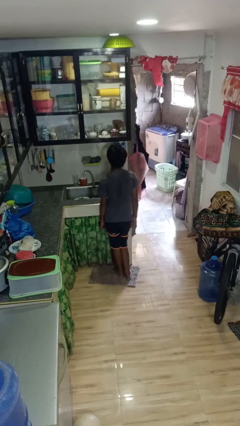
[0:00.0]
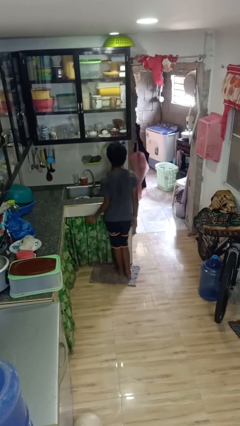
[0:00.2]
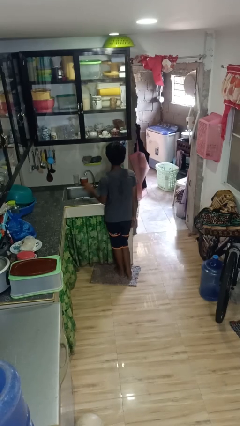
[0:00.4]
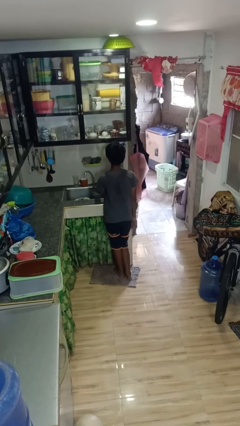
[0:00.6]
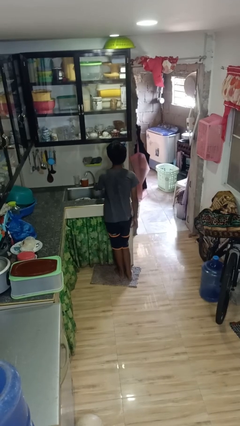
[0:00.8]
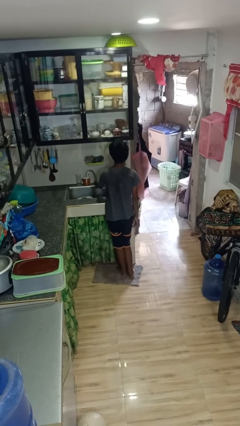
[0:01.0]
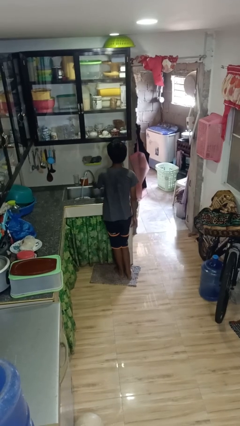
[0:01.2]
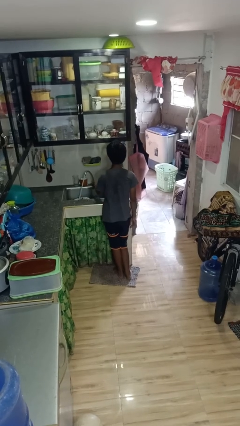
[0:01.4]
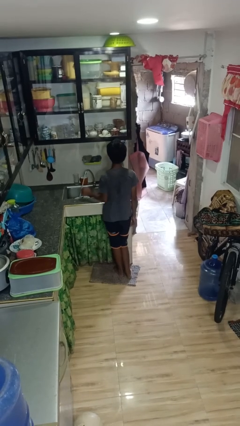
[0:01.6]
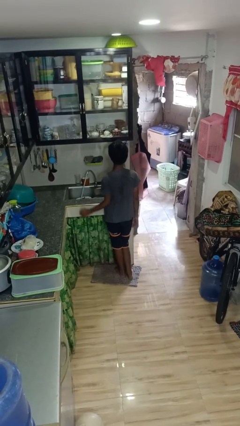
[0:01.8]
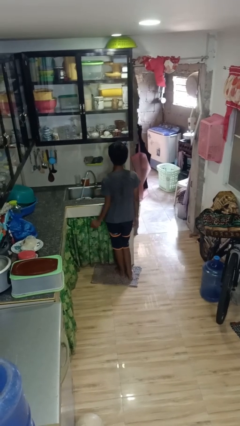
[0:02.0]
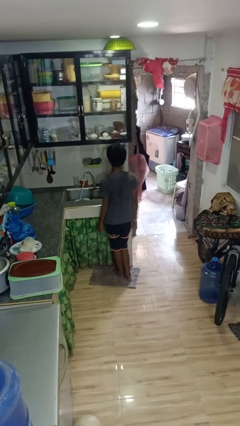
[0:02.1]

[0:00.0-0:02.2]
person turns on faucet

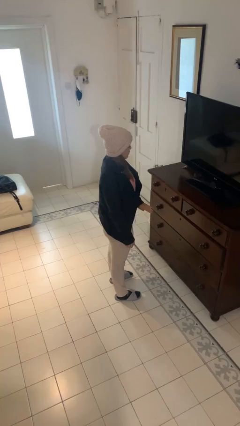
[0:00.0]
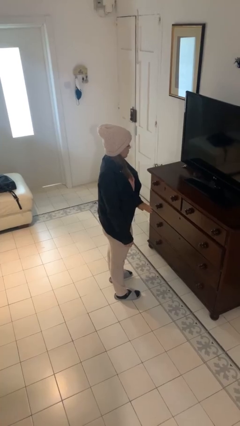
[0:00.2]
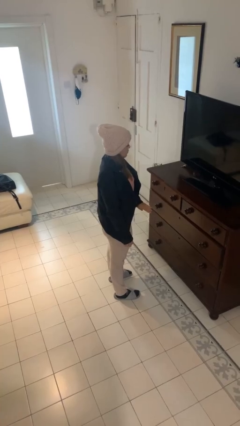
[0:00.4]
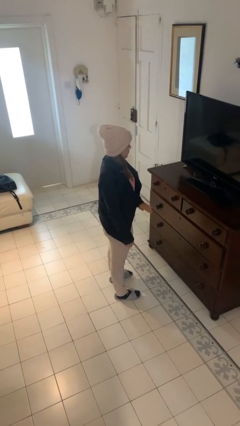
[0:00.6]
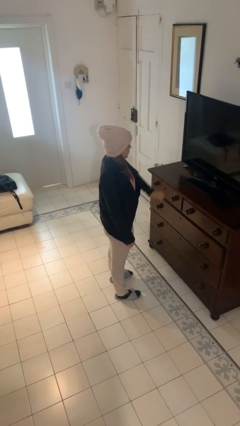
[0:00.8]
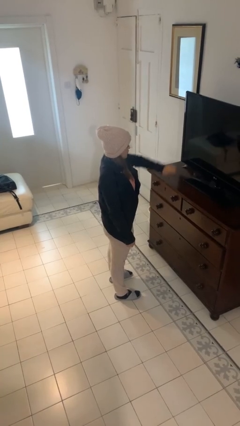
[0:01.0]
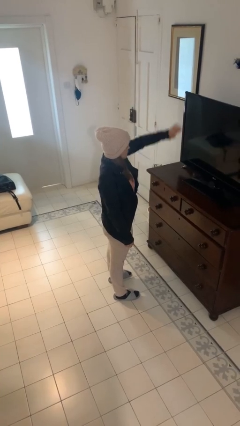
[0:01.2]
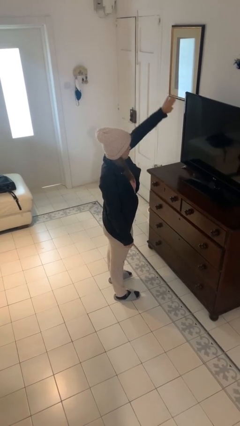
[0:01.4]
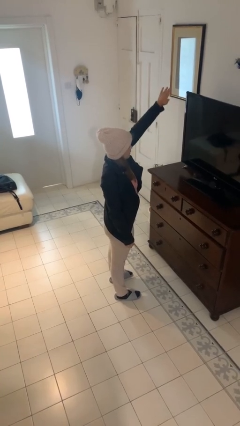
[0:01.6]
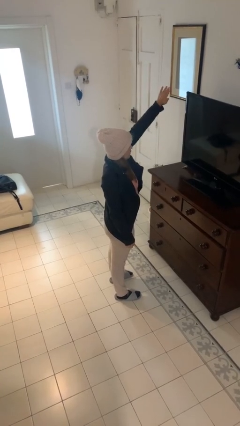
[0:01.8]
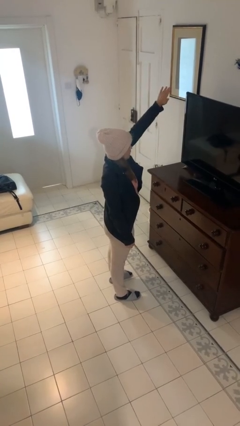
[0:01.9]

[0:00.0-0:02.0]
person gestures swipe up

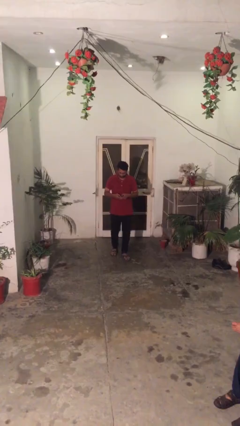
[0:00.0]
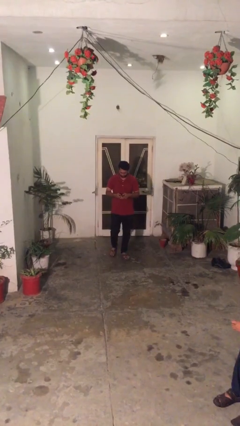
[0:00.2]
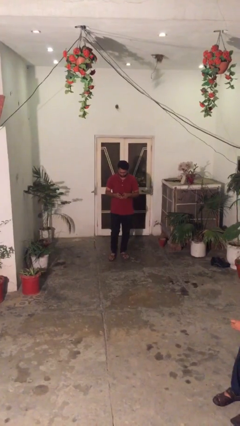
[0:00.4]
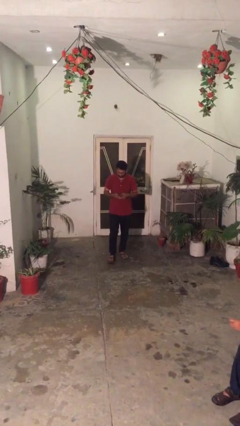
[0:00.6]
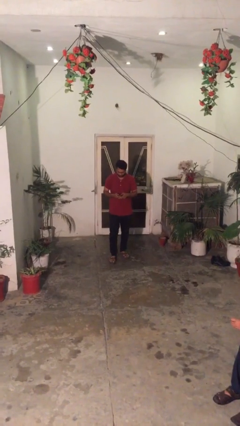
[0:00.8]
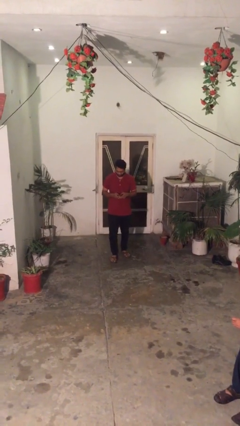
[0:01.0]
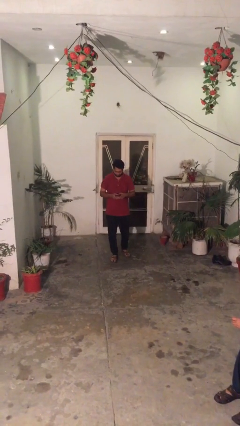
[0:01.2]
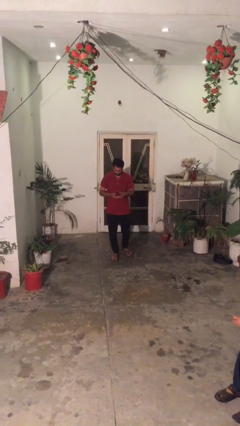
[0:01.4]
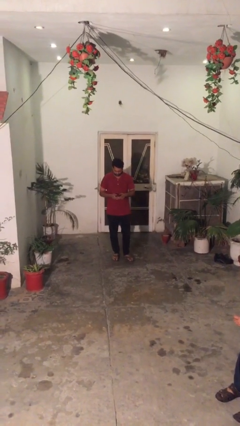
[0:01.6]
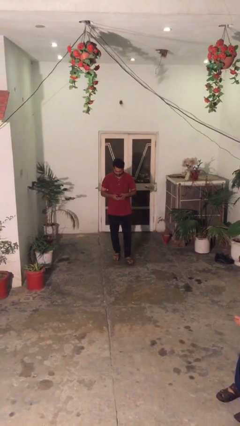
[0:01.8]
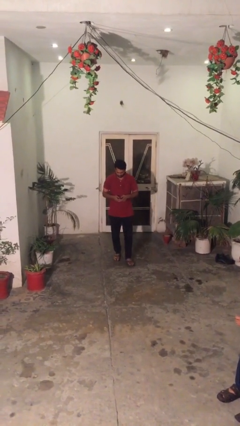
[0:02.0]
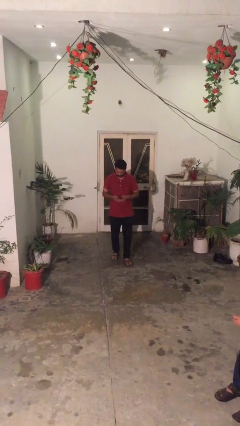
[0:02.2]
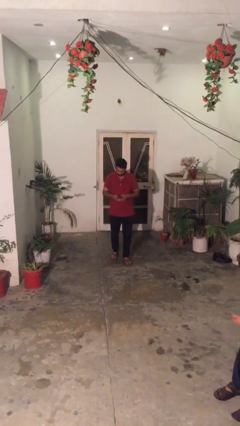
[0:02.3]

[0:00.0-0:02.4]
person texts on phone

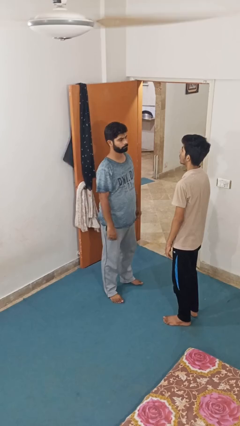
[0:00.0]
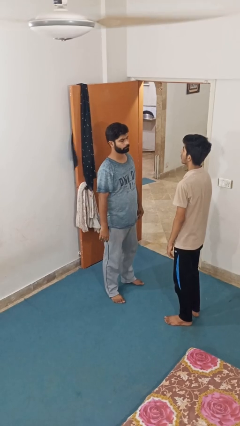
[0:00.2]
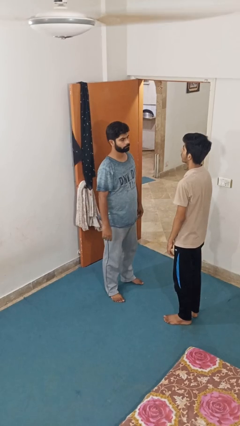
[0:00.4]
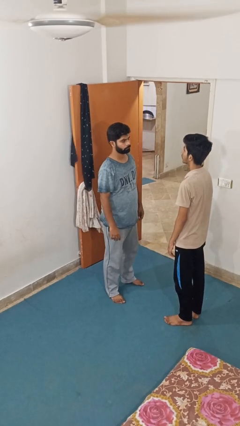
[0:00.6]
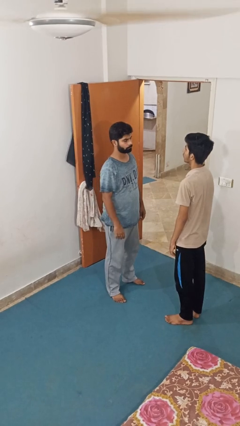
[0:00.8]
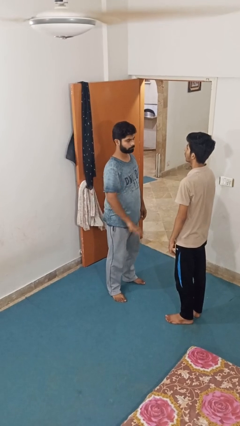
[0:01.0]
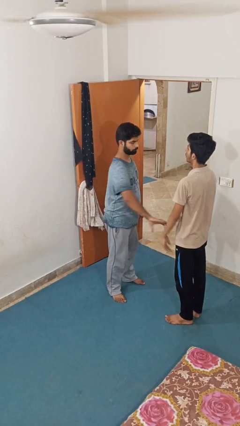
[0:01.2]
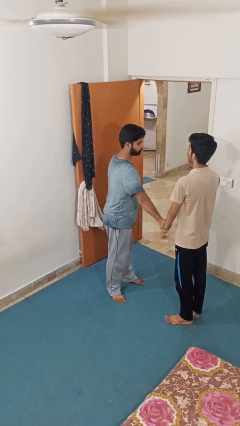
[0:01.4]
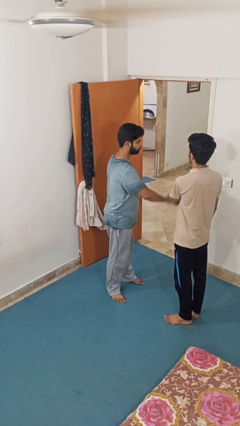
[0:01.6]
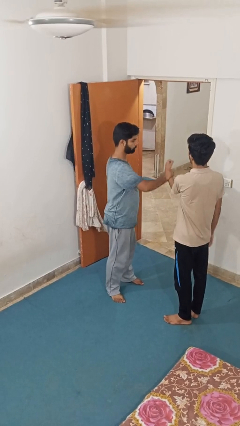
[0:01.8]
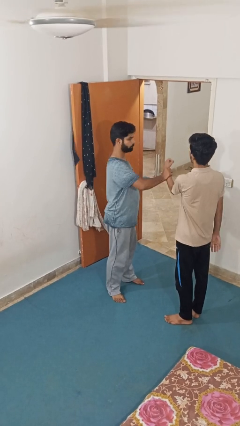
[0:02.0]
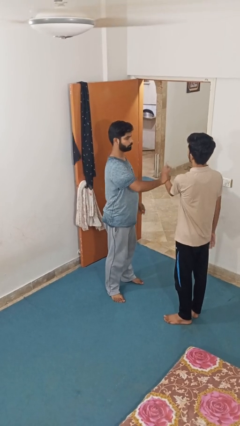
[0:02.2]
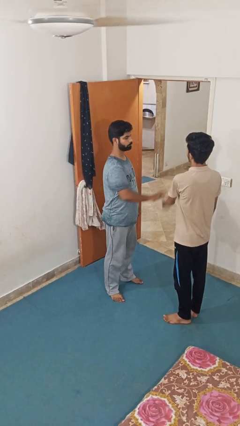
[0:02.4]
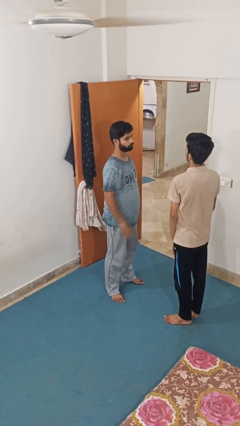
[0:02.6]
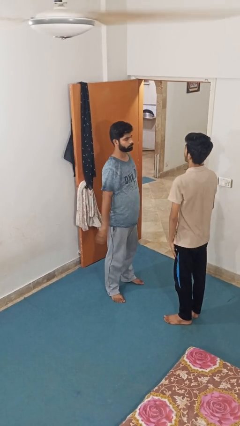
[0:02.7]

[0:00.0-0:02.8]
person grabs person by forearm

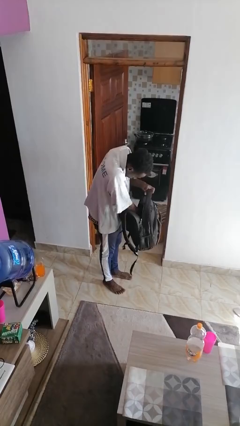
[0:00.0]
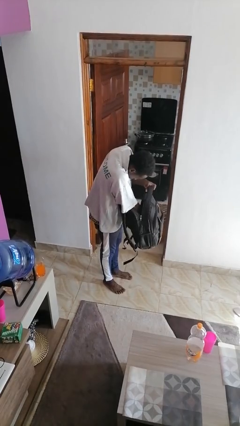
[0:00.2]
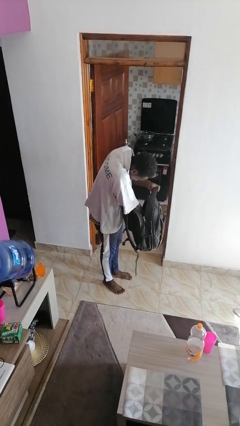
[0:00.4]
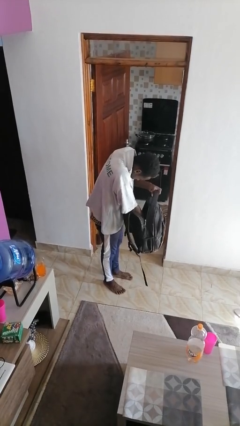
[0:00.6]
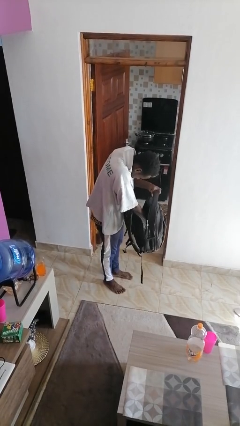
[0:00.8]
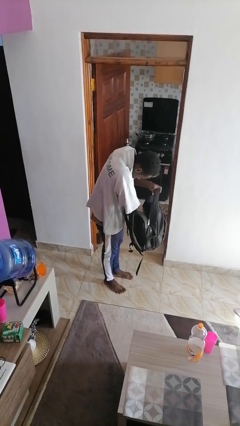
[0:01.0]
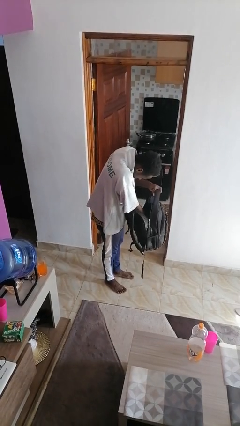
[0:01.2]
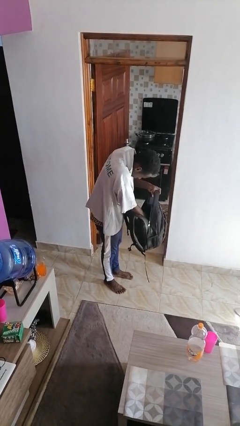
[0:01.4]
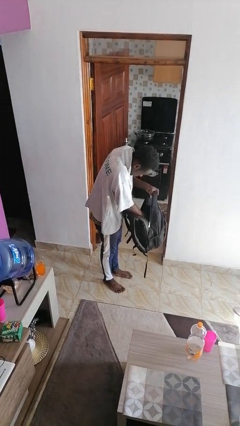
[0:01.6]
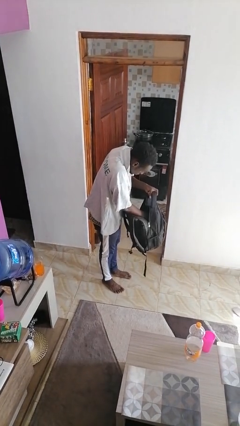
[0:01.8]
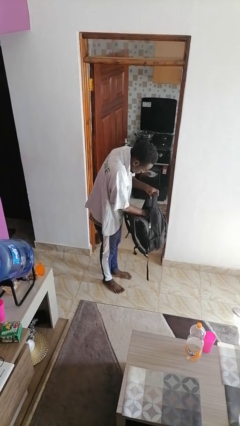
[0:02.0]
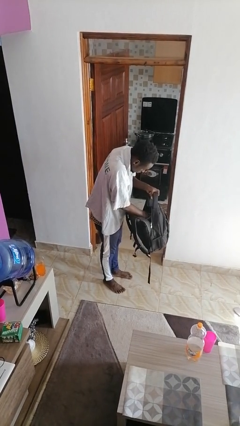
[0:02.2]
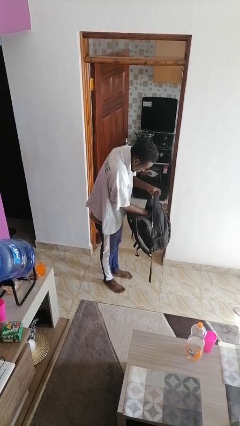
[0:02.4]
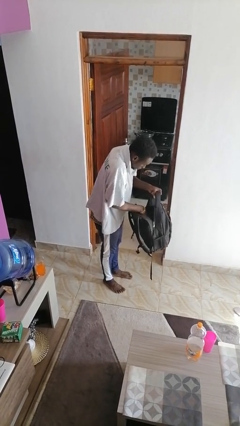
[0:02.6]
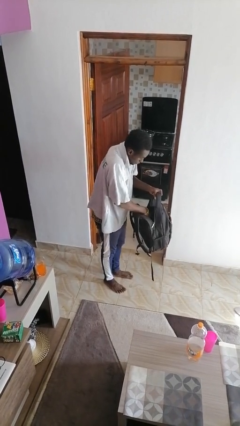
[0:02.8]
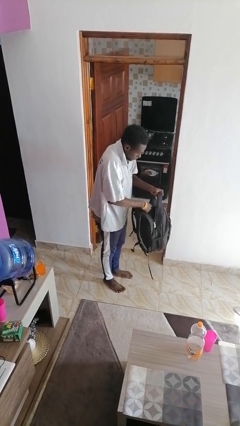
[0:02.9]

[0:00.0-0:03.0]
person searches in backpack

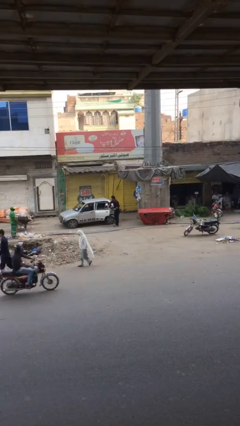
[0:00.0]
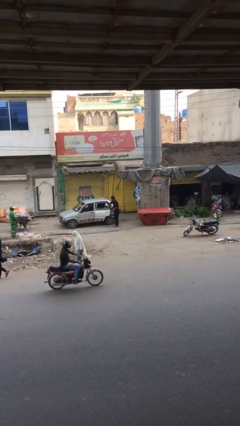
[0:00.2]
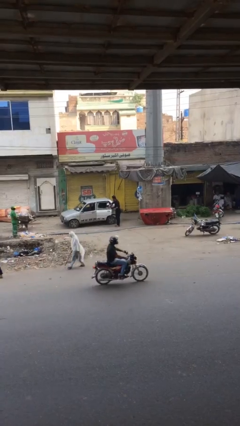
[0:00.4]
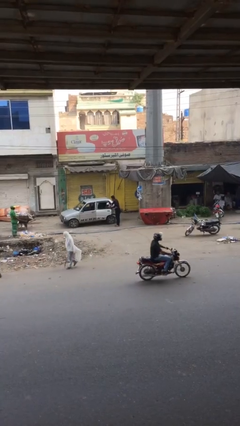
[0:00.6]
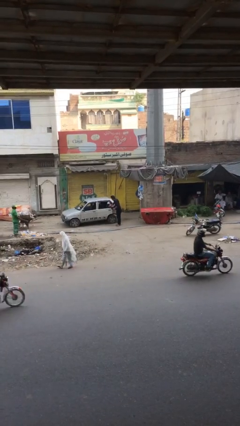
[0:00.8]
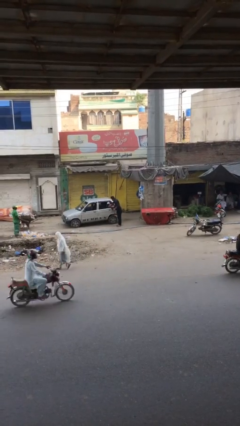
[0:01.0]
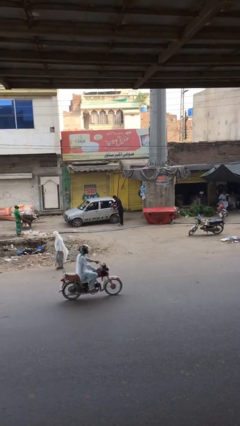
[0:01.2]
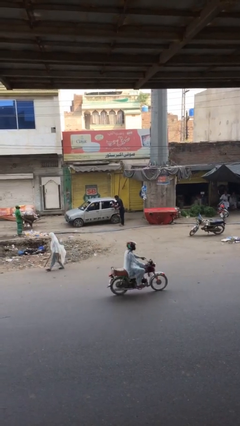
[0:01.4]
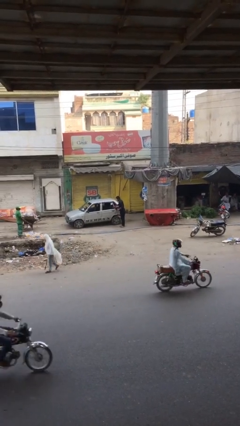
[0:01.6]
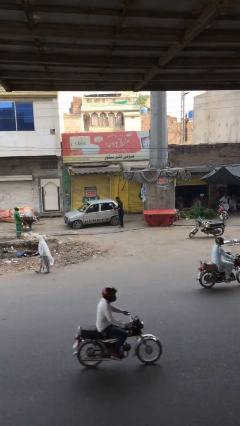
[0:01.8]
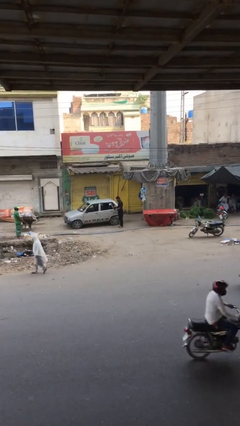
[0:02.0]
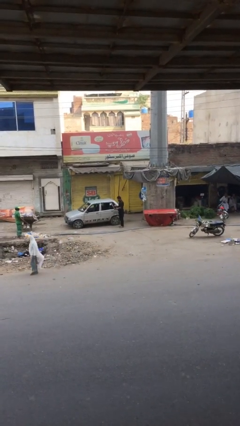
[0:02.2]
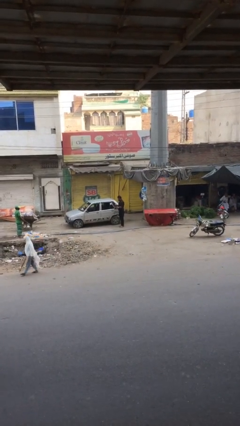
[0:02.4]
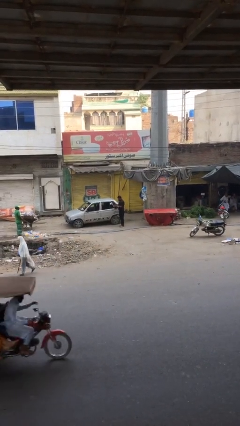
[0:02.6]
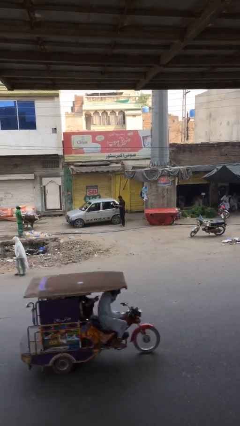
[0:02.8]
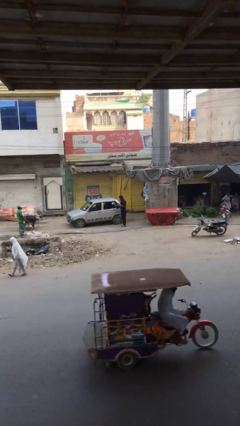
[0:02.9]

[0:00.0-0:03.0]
person closes car door

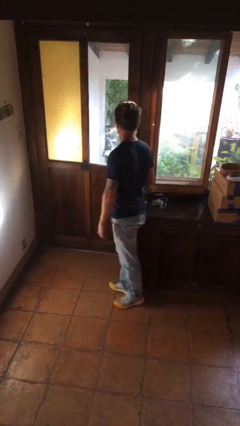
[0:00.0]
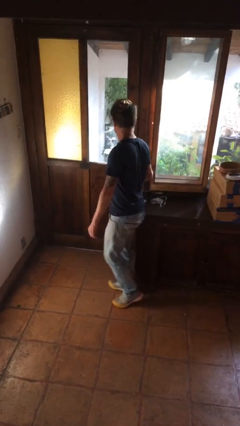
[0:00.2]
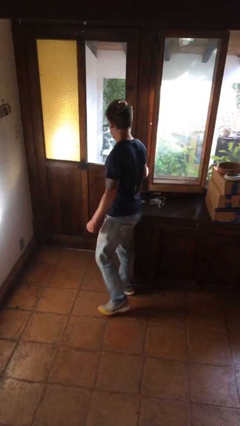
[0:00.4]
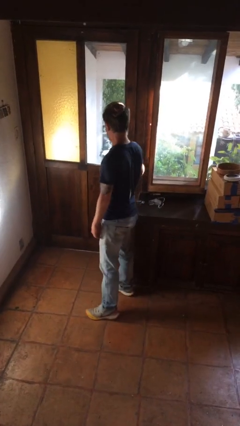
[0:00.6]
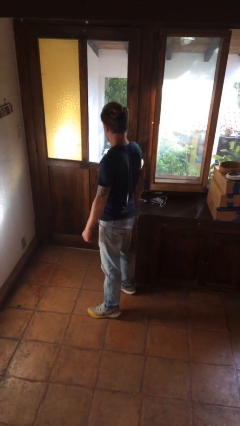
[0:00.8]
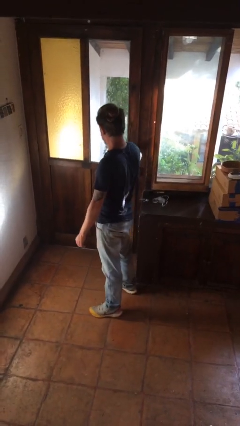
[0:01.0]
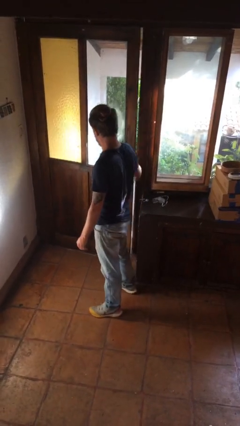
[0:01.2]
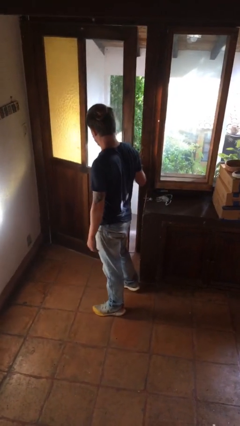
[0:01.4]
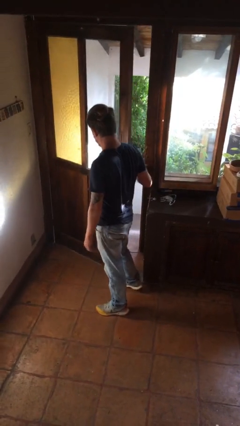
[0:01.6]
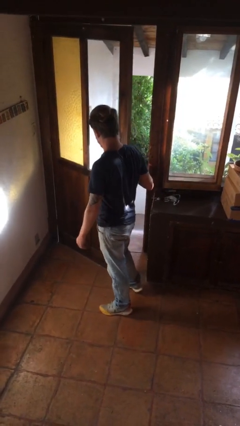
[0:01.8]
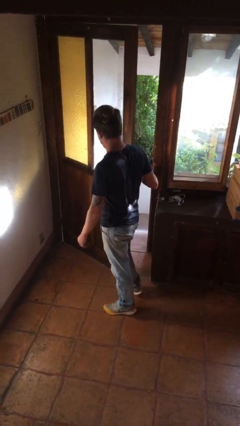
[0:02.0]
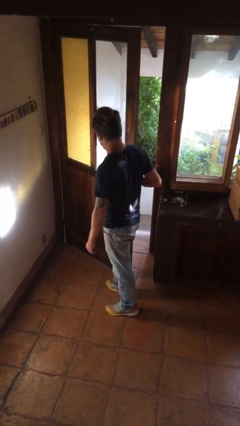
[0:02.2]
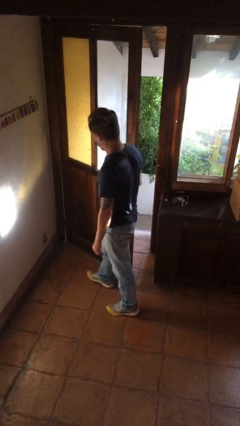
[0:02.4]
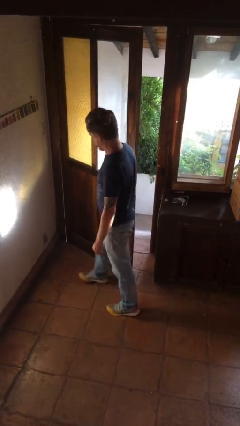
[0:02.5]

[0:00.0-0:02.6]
person opens facility door
